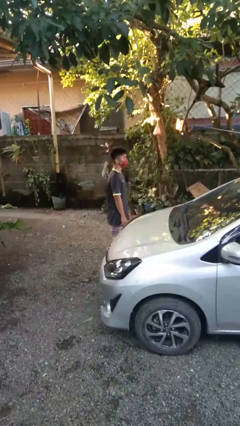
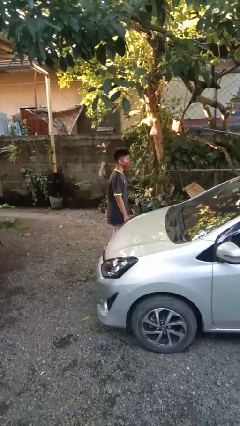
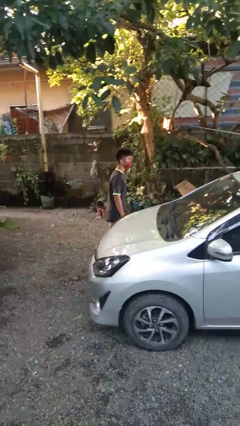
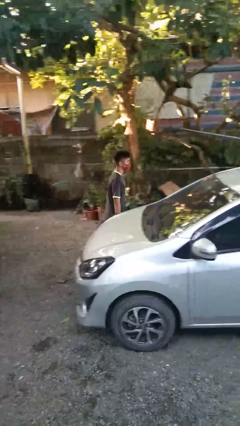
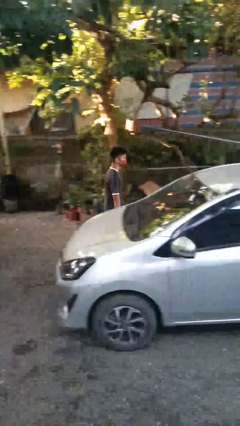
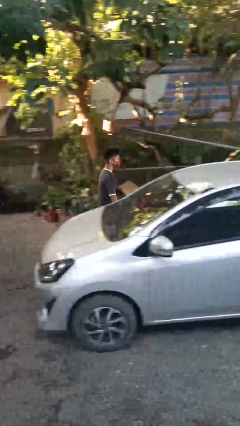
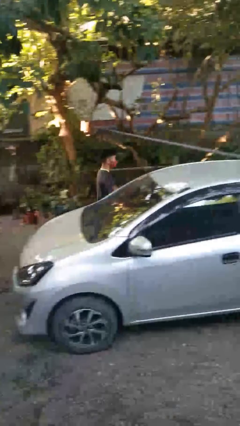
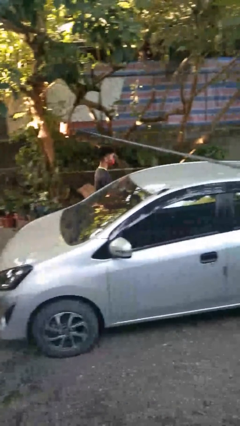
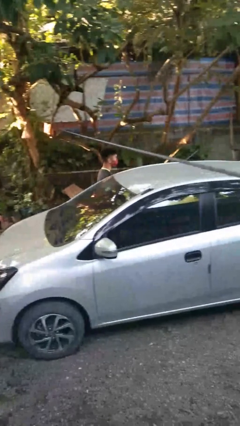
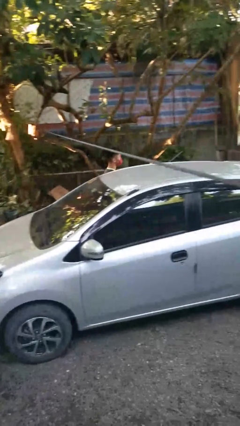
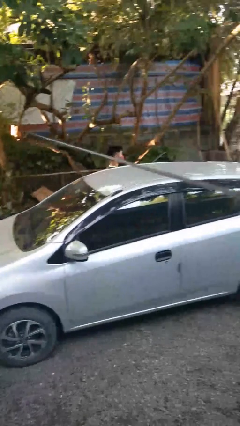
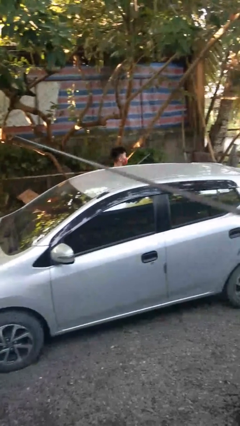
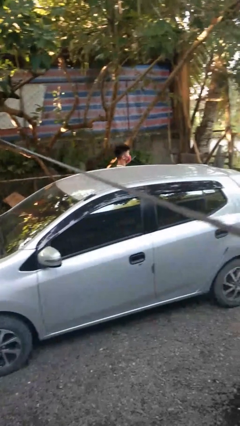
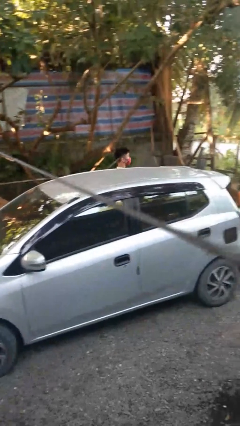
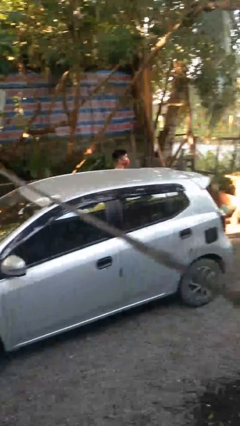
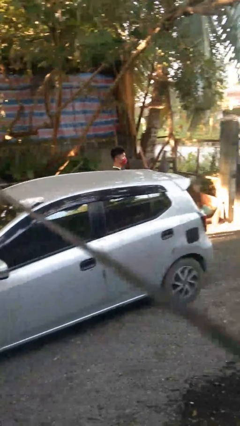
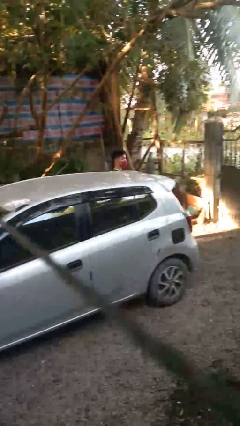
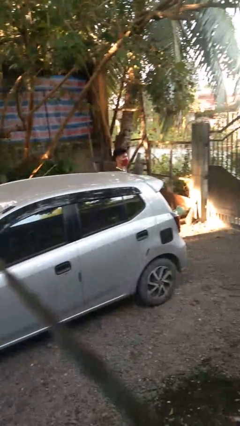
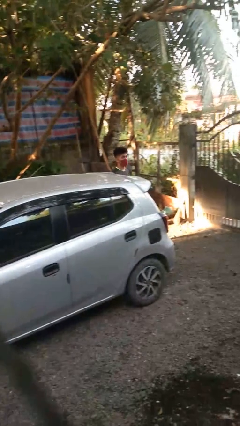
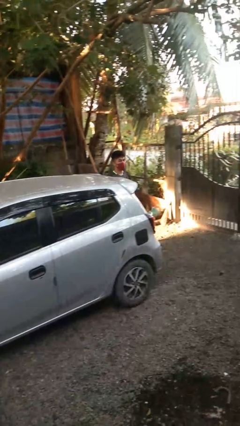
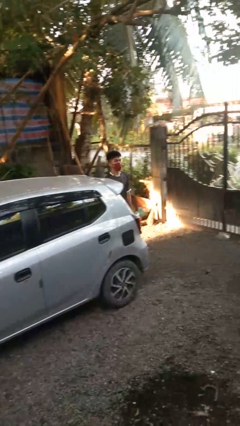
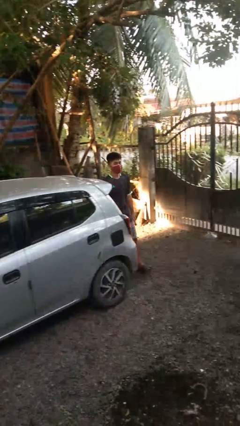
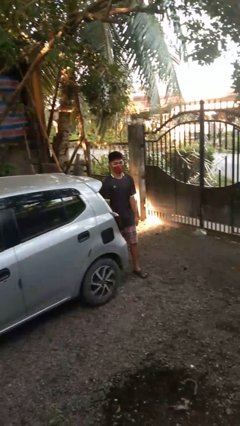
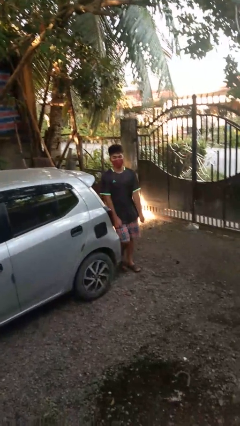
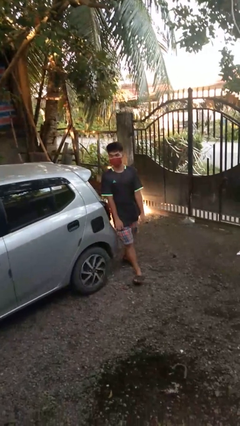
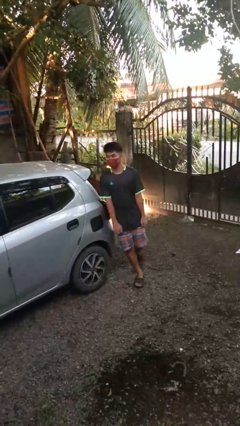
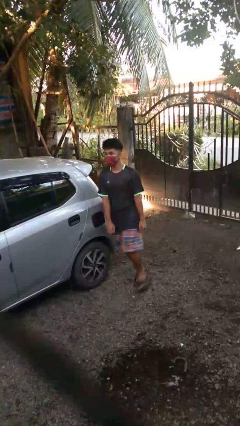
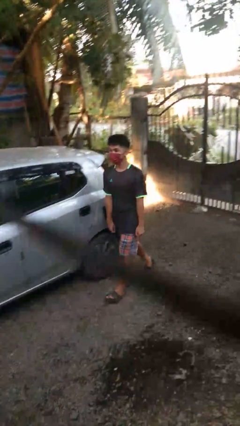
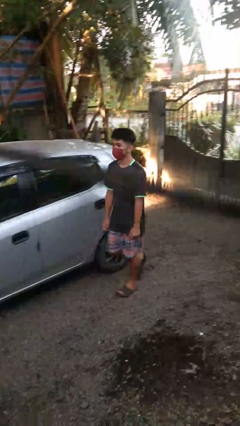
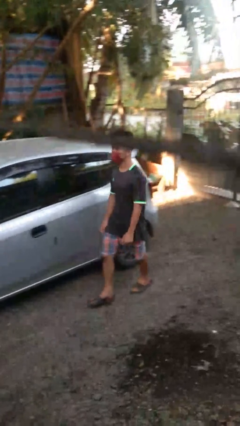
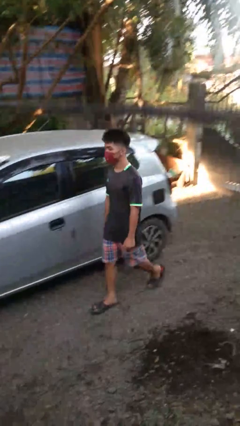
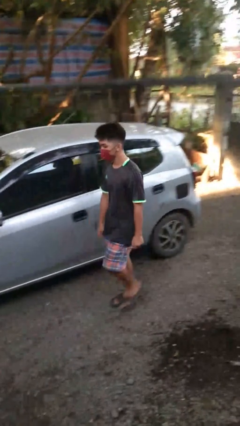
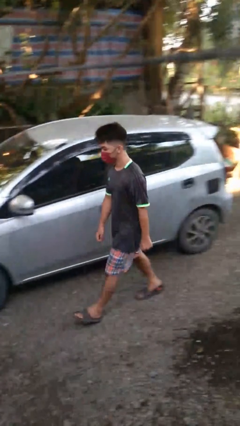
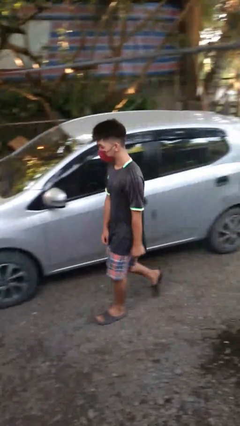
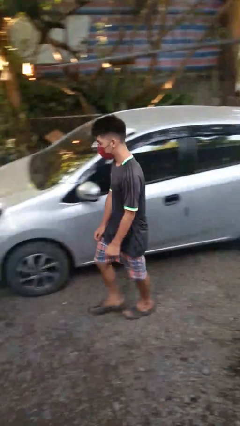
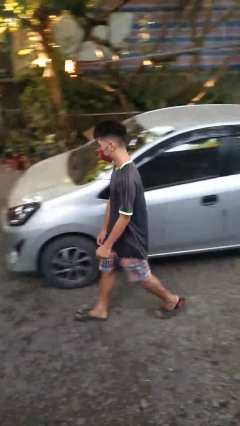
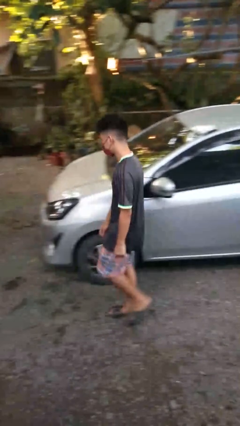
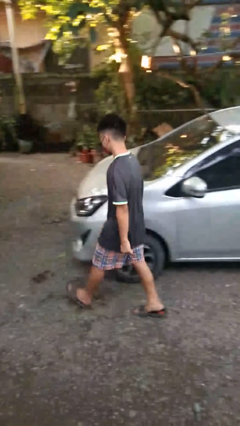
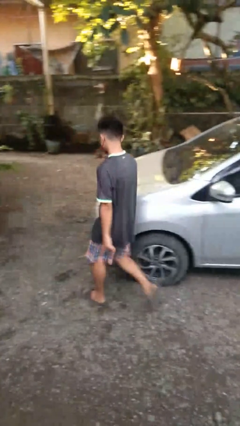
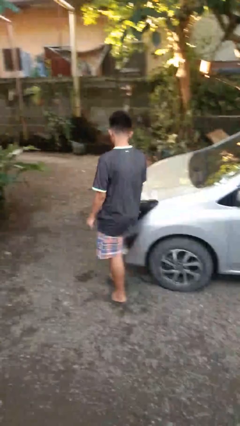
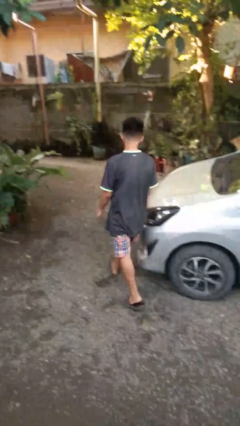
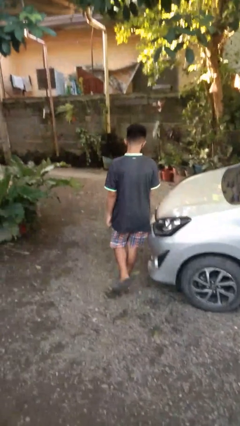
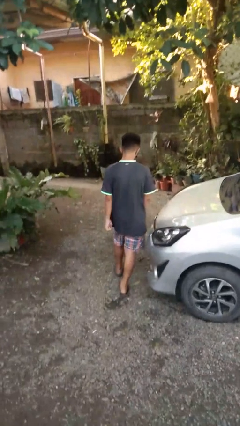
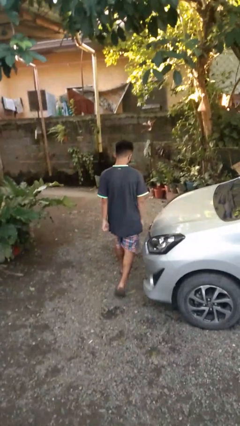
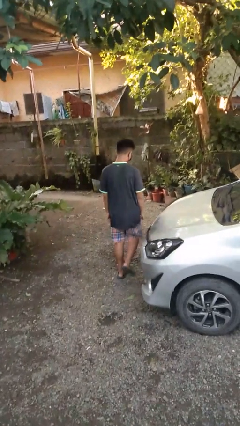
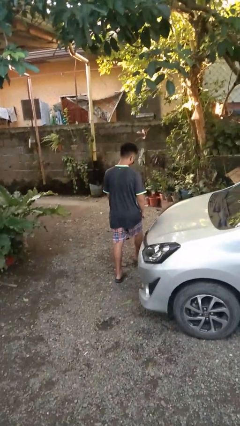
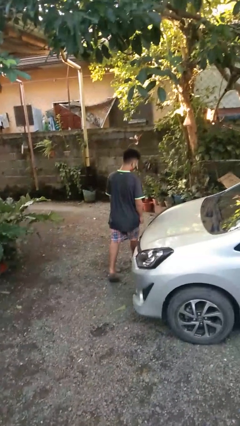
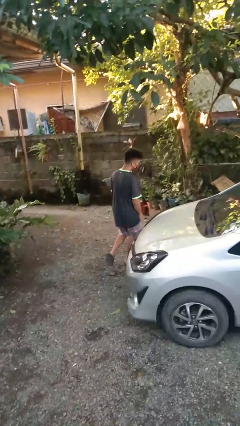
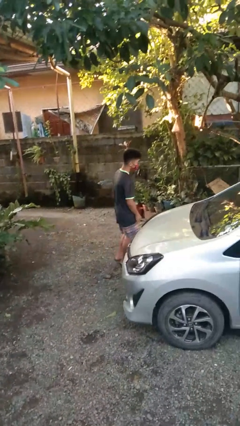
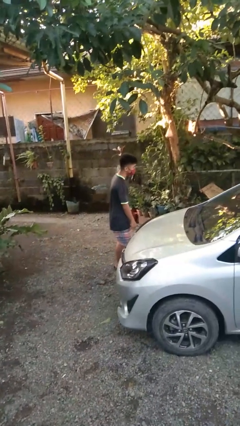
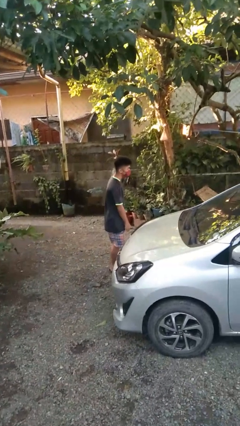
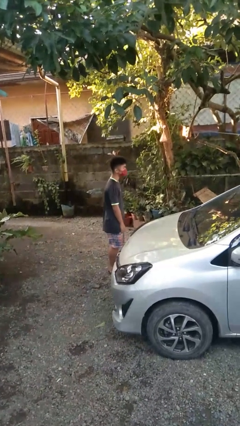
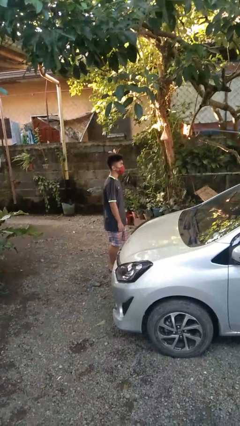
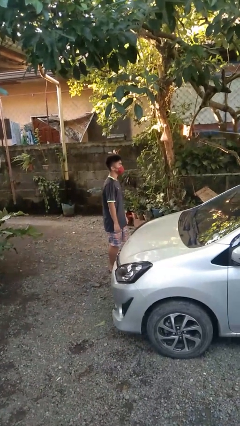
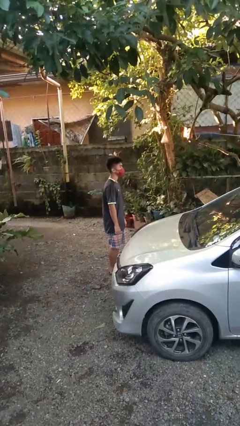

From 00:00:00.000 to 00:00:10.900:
person walks around car

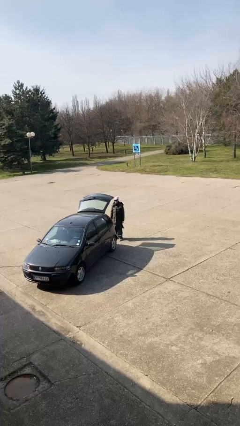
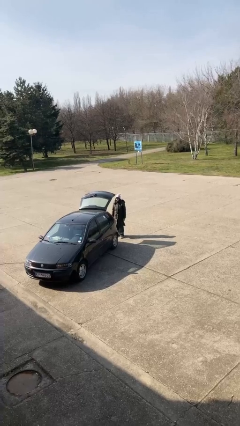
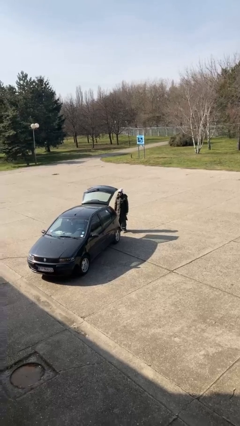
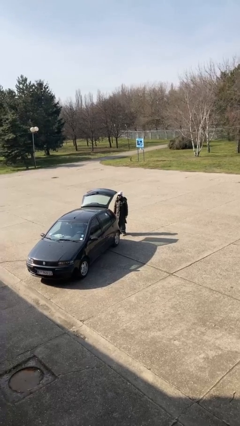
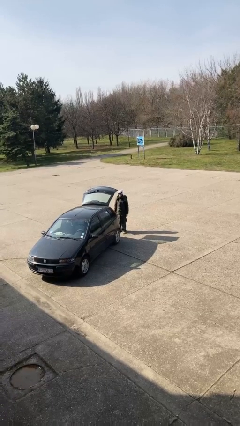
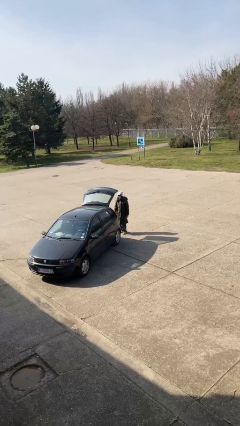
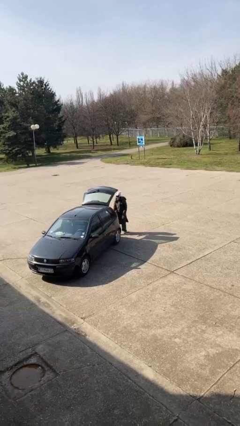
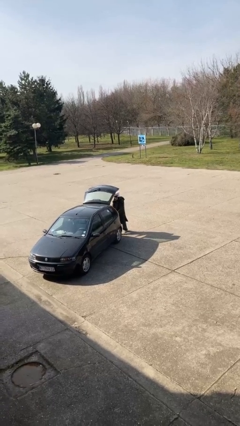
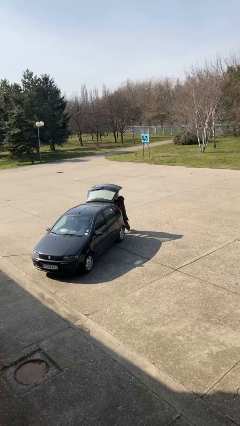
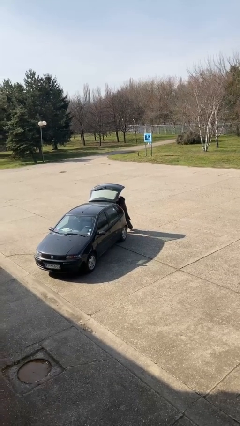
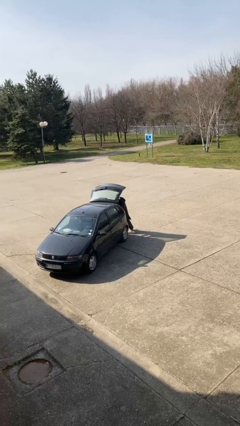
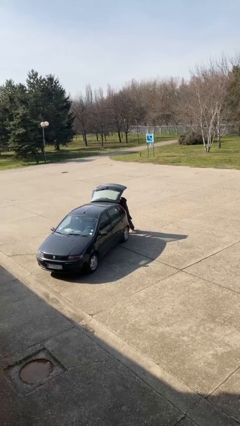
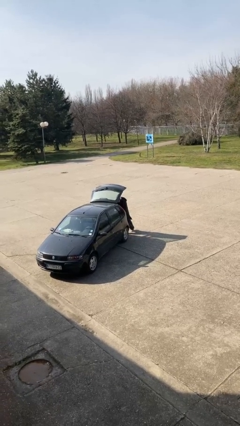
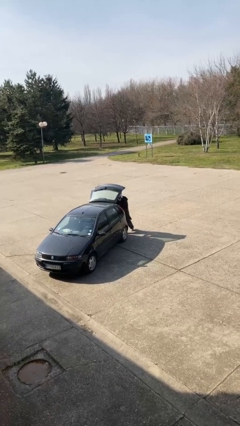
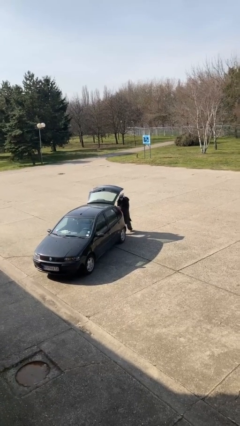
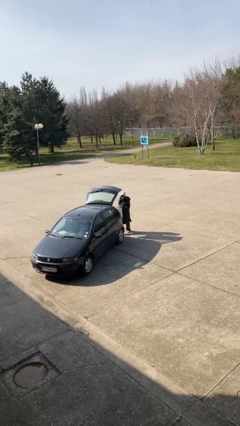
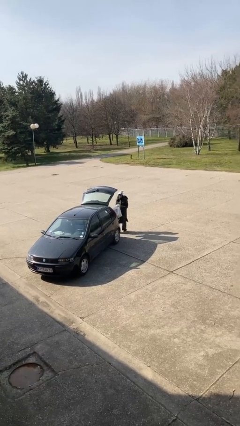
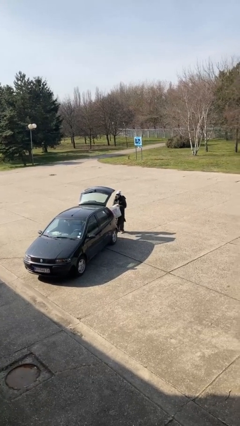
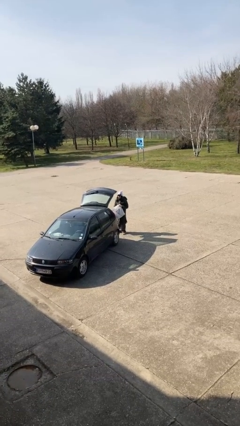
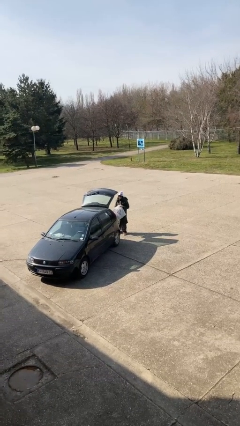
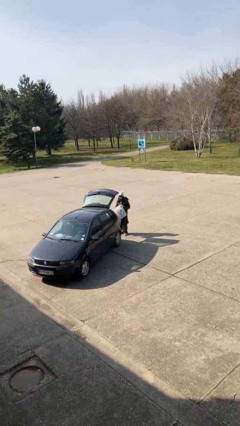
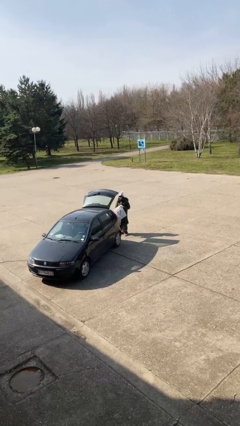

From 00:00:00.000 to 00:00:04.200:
person unloads car

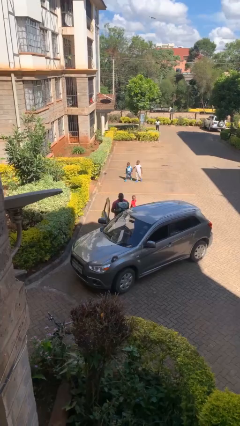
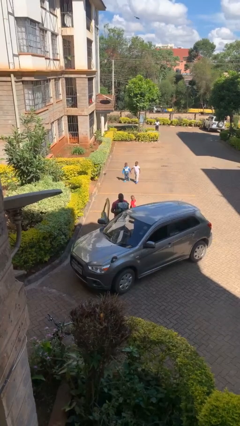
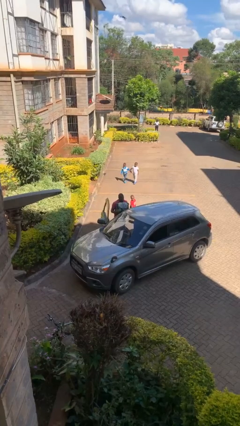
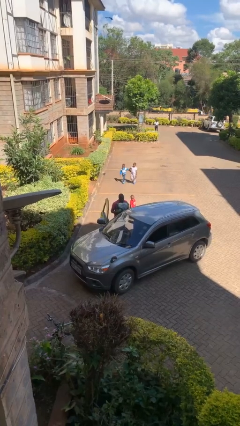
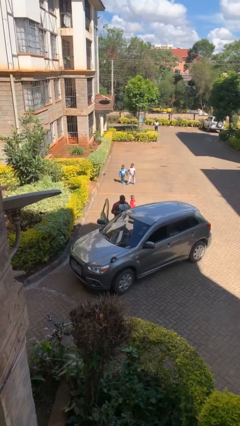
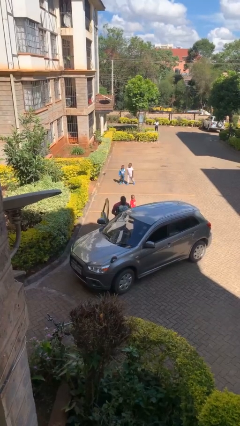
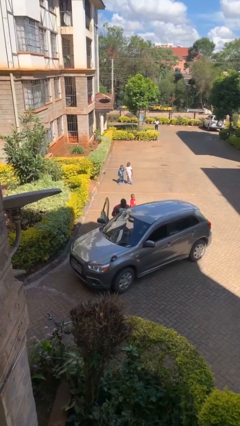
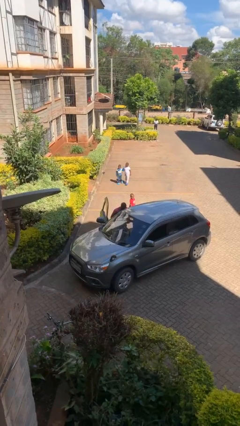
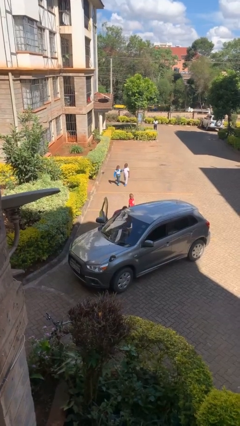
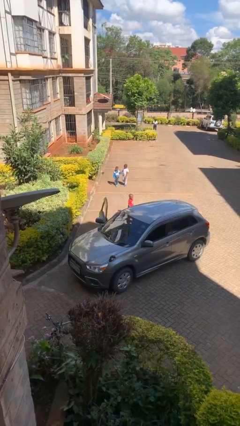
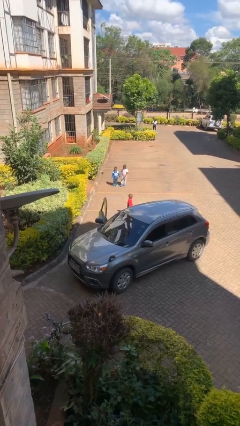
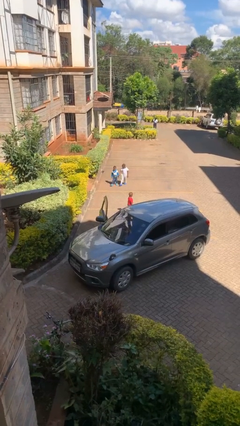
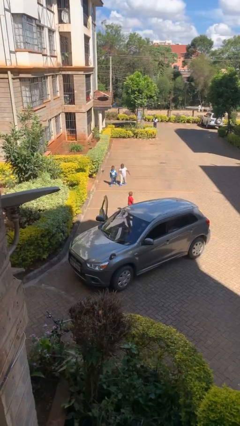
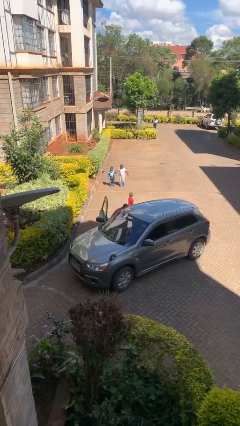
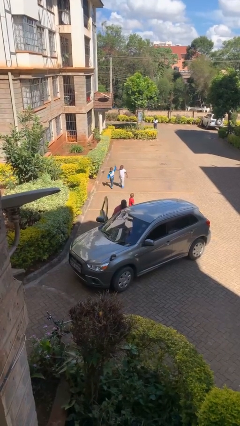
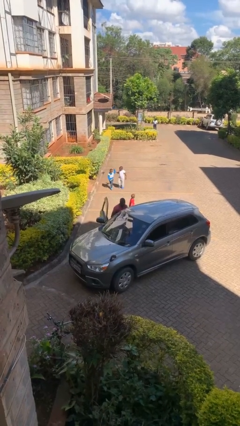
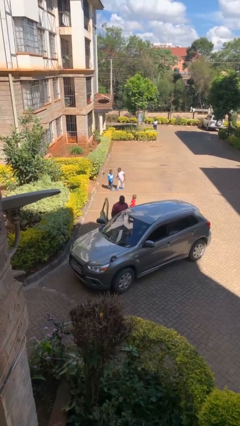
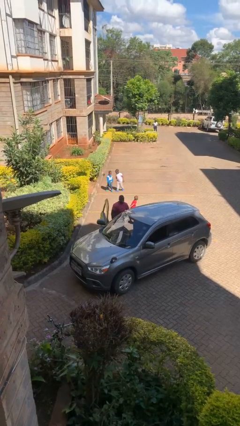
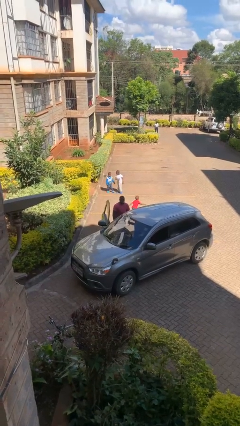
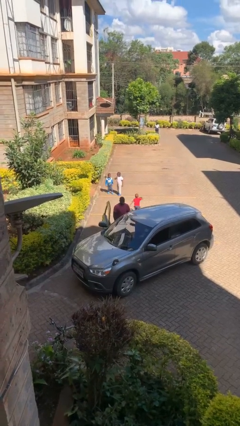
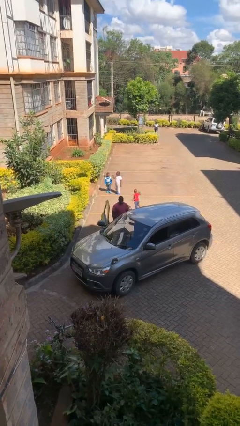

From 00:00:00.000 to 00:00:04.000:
person loads car
